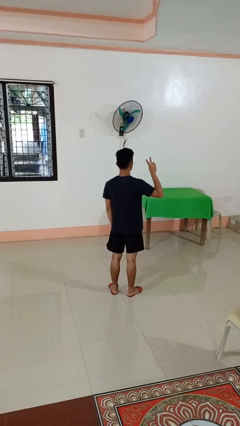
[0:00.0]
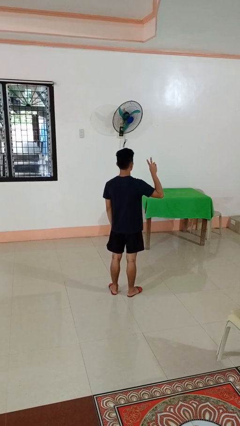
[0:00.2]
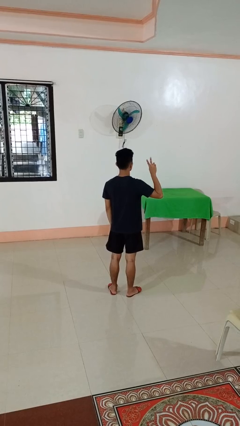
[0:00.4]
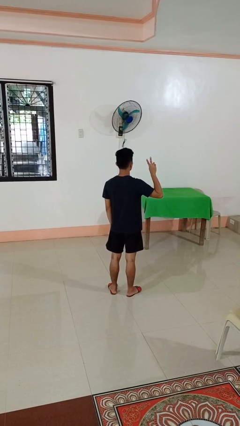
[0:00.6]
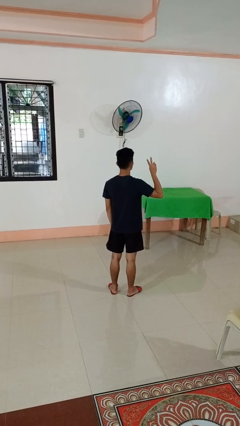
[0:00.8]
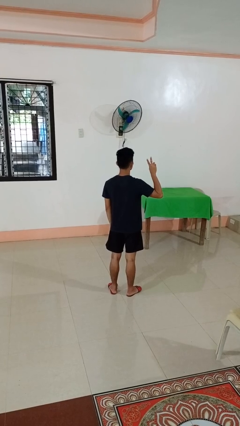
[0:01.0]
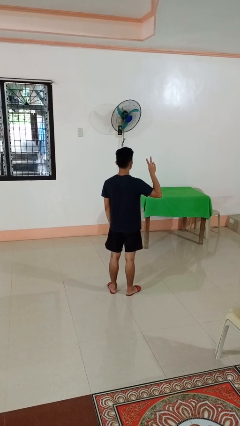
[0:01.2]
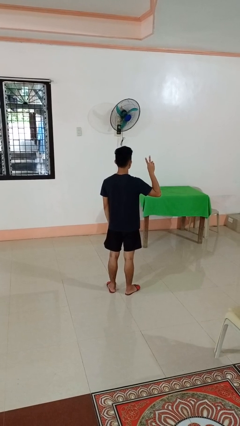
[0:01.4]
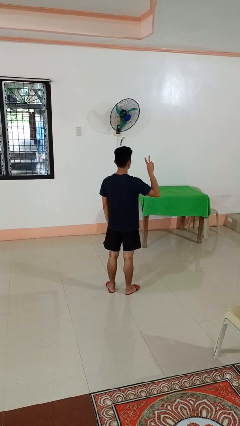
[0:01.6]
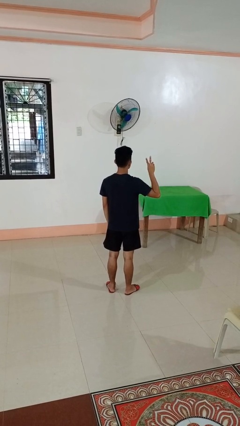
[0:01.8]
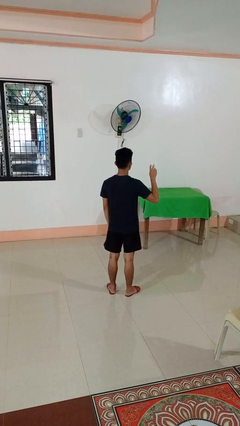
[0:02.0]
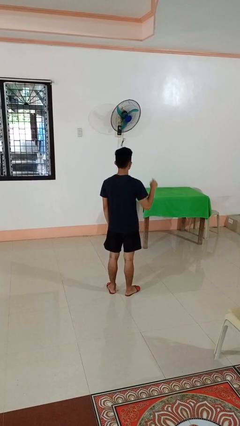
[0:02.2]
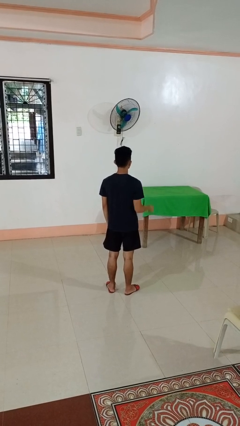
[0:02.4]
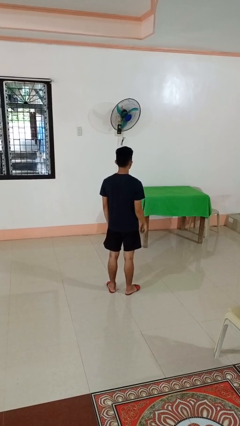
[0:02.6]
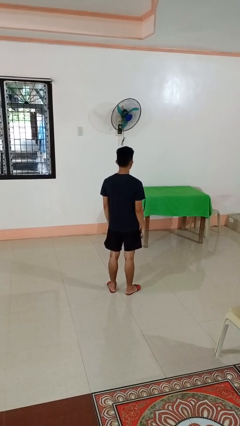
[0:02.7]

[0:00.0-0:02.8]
person gestures peace

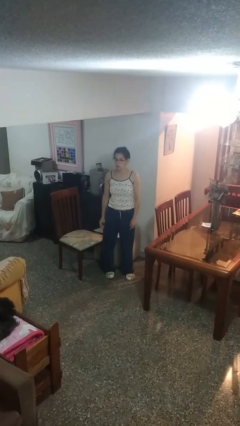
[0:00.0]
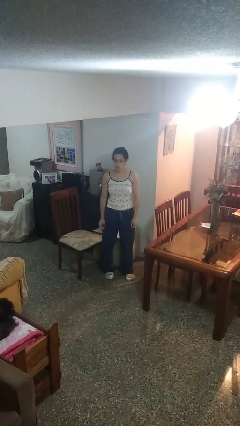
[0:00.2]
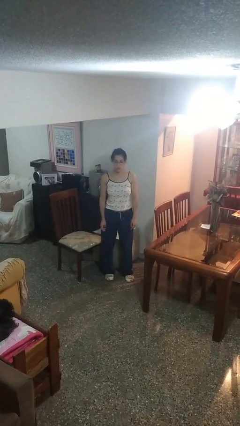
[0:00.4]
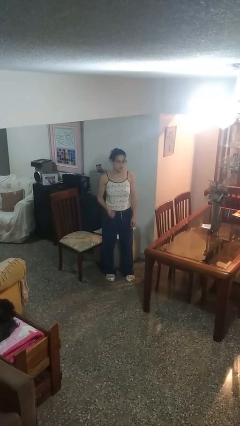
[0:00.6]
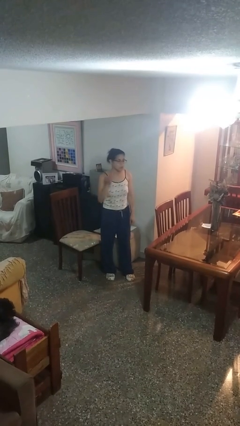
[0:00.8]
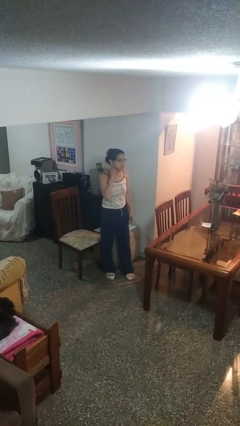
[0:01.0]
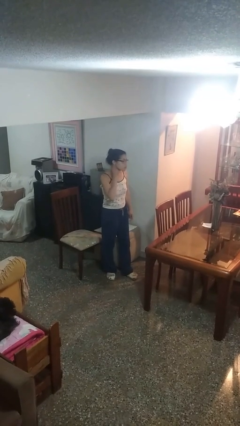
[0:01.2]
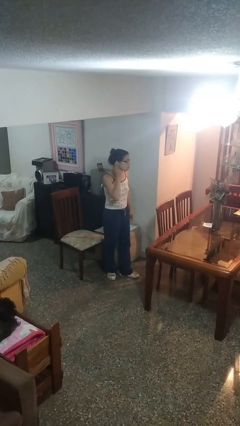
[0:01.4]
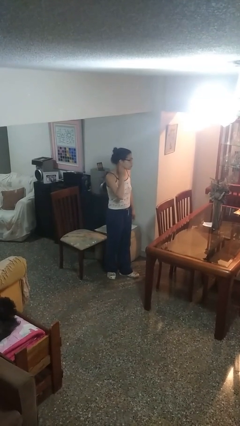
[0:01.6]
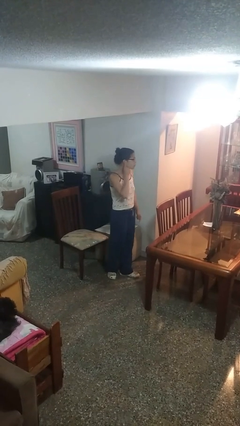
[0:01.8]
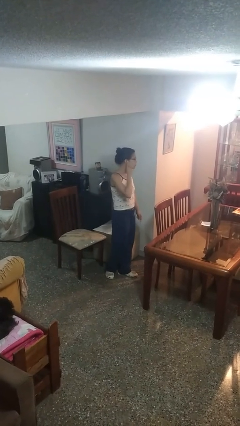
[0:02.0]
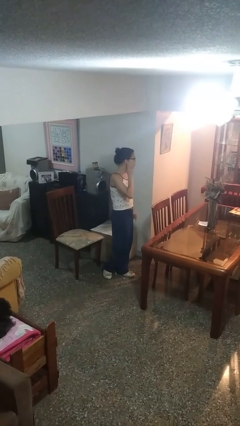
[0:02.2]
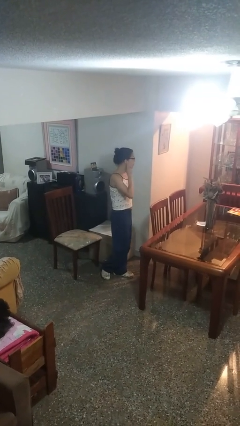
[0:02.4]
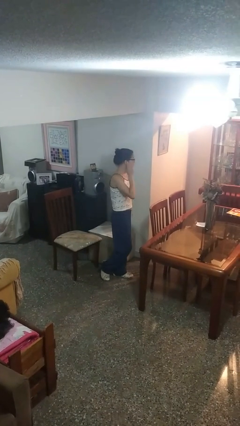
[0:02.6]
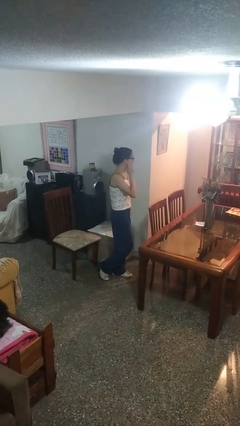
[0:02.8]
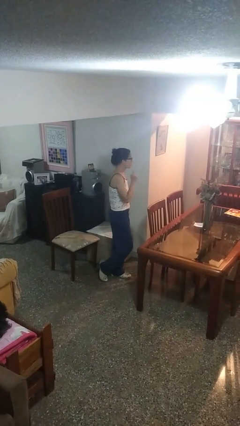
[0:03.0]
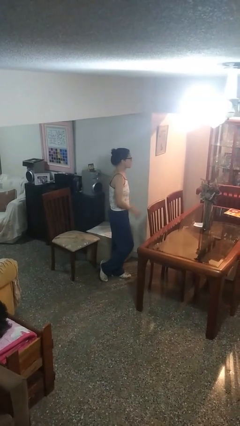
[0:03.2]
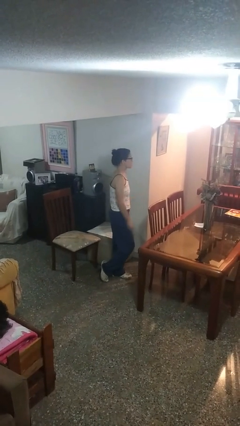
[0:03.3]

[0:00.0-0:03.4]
person gestures listen closely

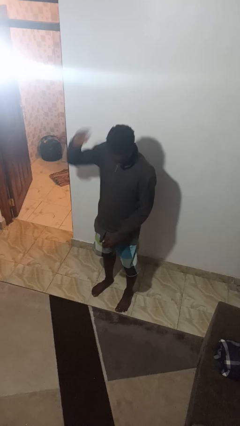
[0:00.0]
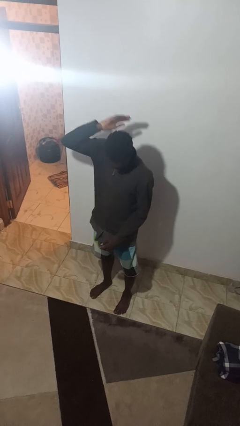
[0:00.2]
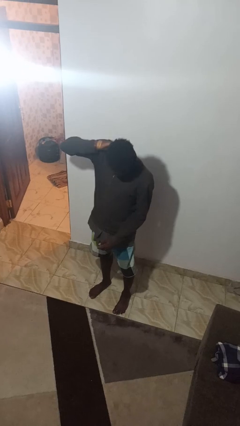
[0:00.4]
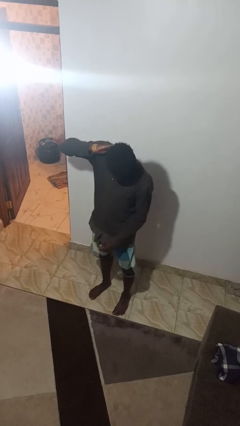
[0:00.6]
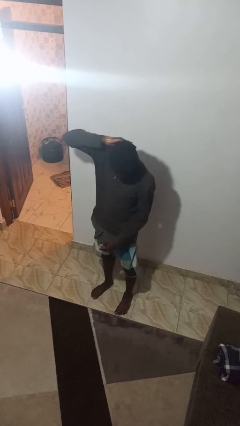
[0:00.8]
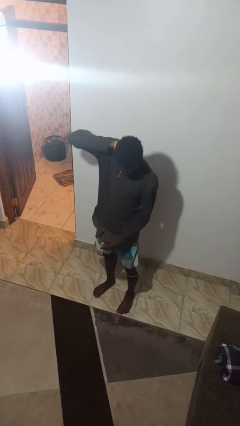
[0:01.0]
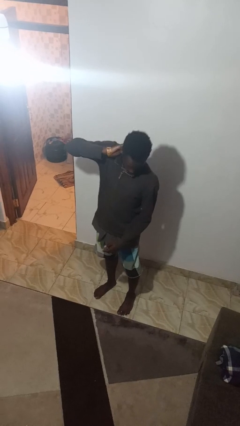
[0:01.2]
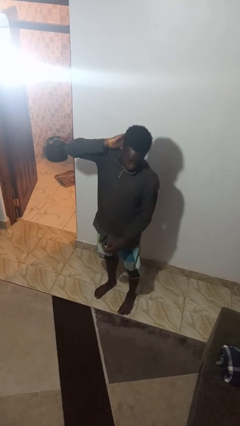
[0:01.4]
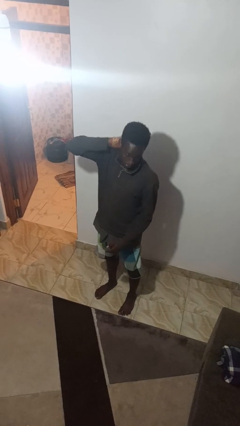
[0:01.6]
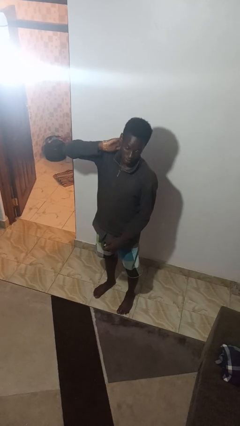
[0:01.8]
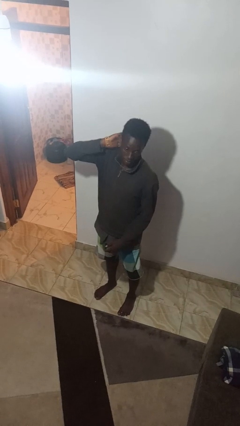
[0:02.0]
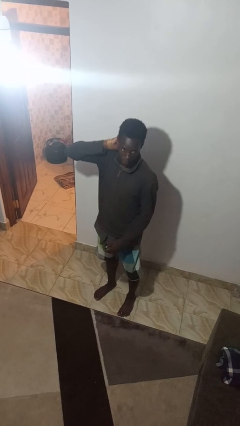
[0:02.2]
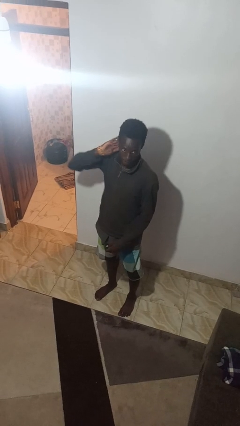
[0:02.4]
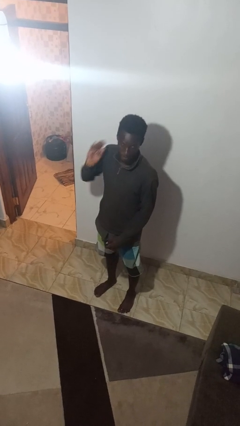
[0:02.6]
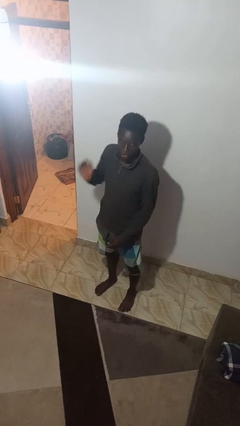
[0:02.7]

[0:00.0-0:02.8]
person swats bug

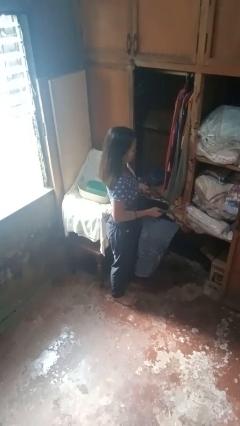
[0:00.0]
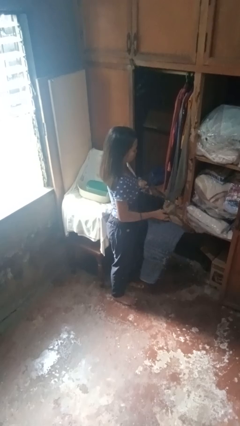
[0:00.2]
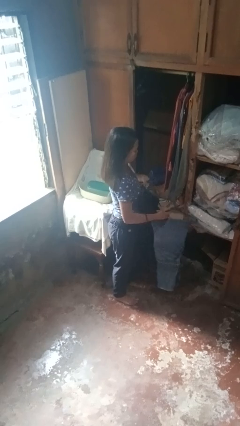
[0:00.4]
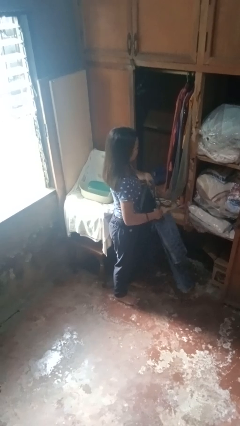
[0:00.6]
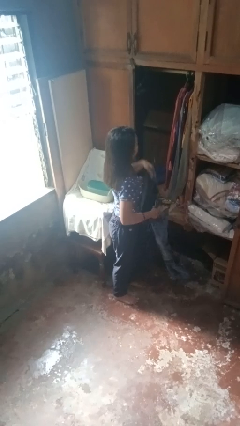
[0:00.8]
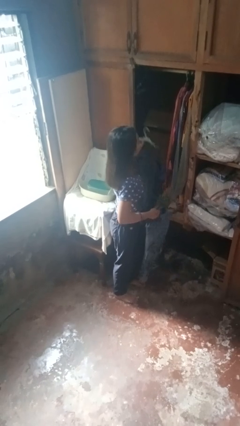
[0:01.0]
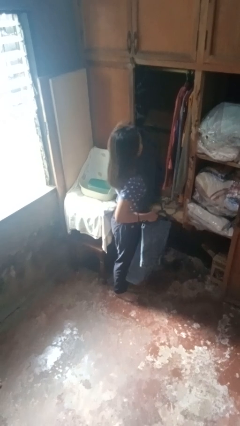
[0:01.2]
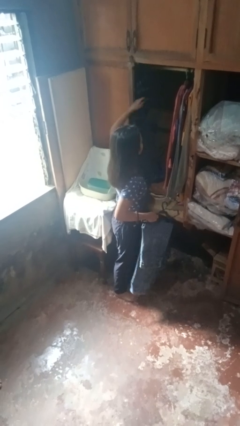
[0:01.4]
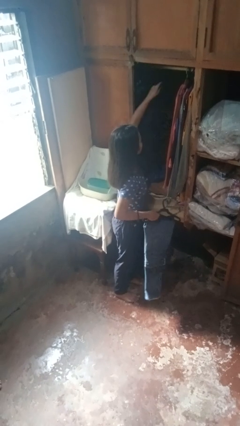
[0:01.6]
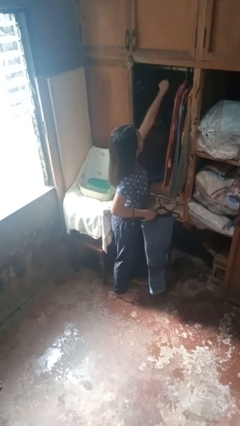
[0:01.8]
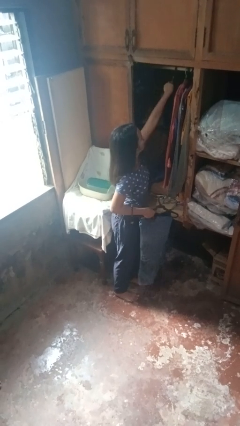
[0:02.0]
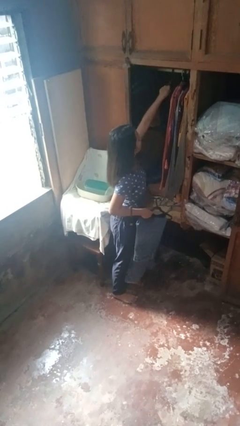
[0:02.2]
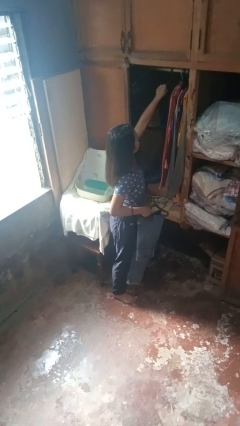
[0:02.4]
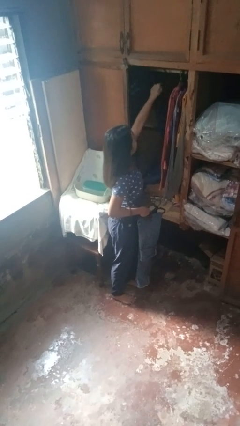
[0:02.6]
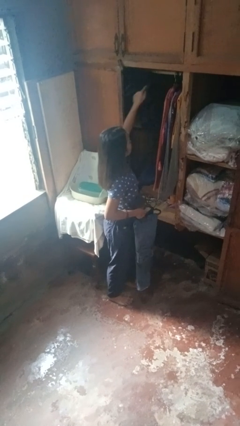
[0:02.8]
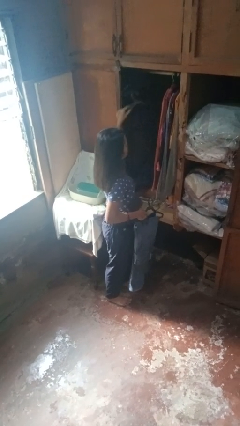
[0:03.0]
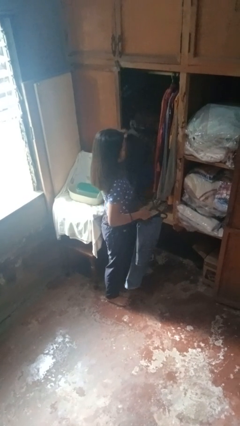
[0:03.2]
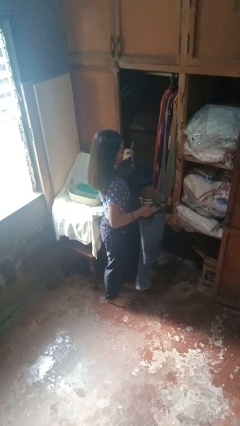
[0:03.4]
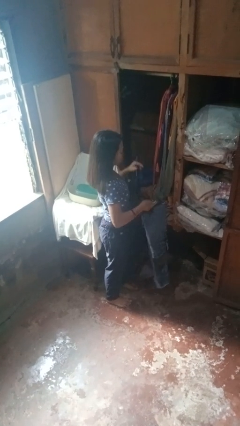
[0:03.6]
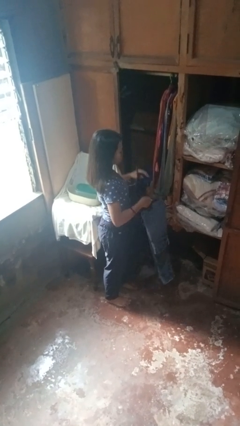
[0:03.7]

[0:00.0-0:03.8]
person puts clothes into closet

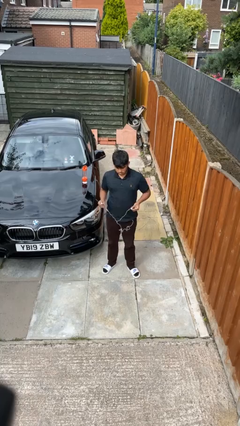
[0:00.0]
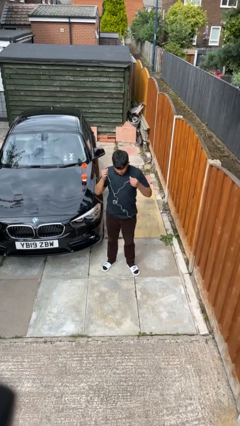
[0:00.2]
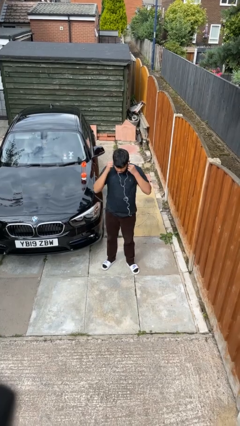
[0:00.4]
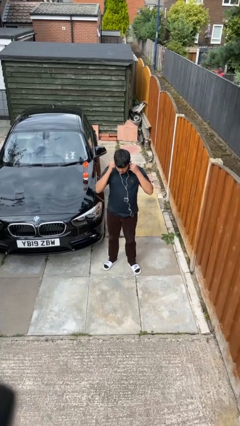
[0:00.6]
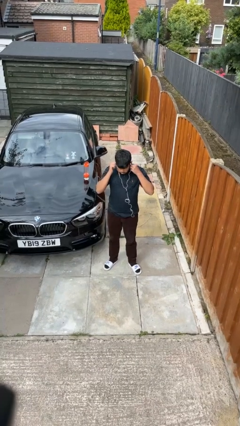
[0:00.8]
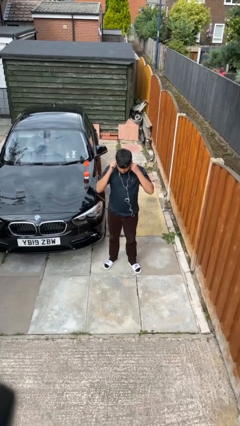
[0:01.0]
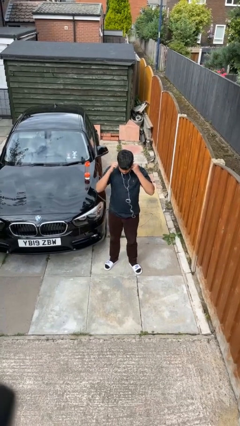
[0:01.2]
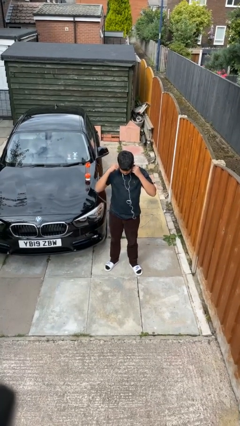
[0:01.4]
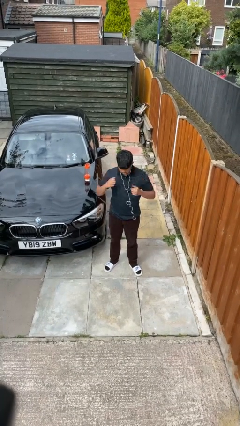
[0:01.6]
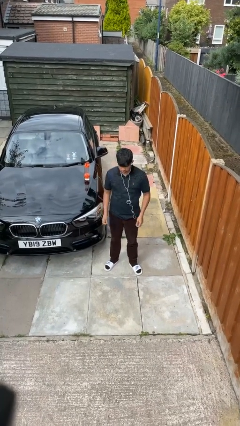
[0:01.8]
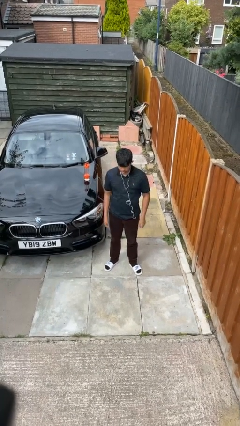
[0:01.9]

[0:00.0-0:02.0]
person puts on headphones

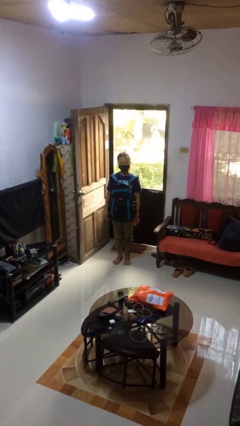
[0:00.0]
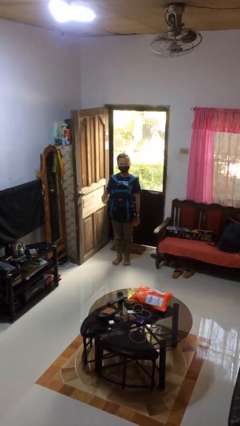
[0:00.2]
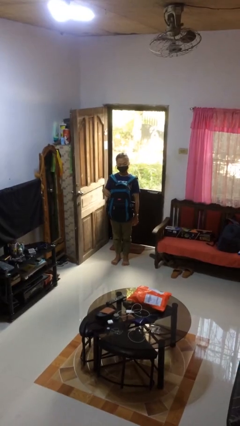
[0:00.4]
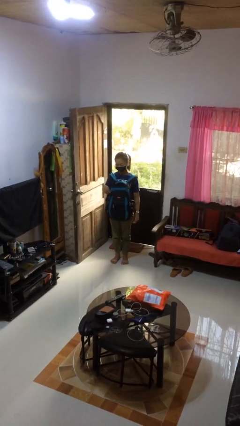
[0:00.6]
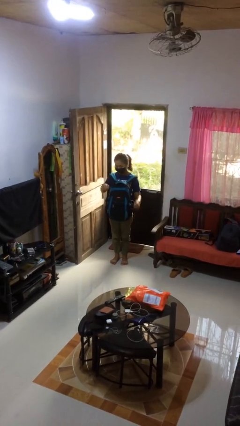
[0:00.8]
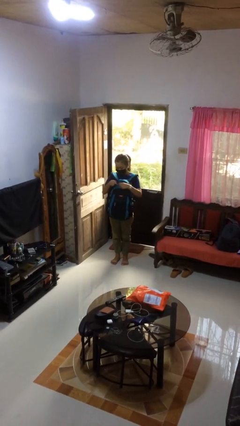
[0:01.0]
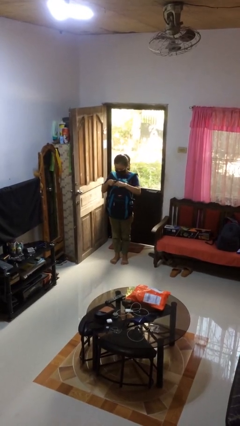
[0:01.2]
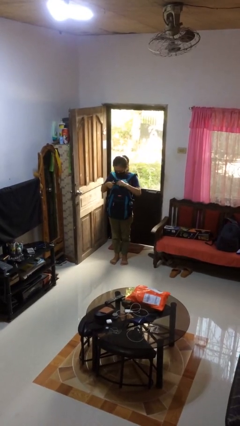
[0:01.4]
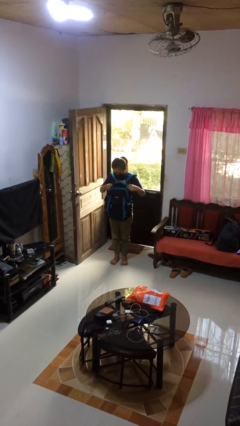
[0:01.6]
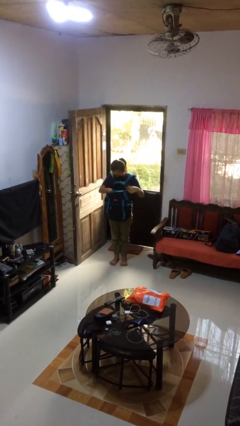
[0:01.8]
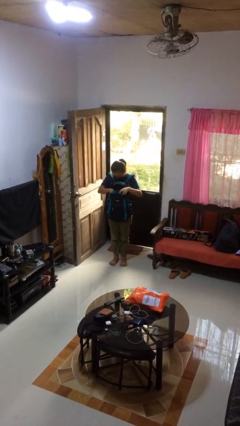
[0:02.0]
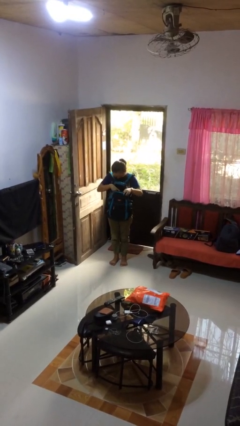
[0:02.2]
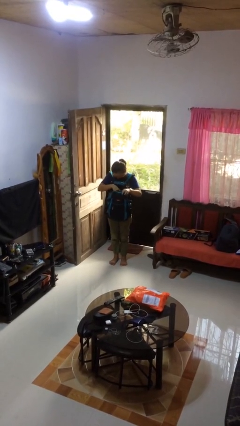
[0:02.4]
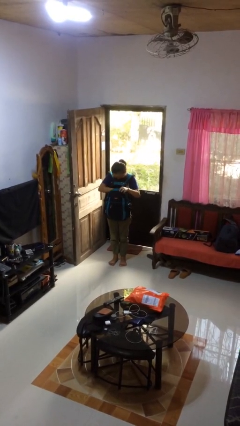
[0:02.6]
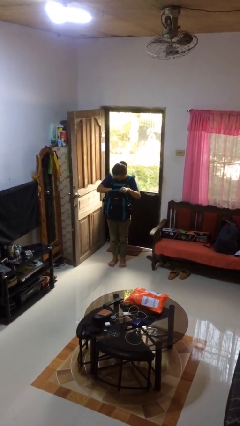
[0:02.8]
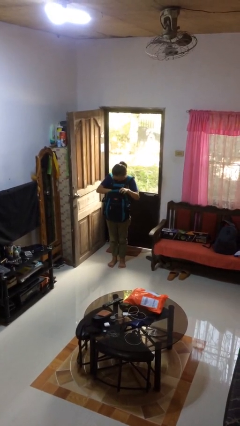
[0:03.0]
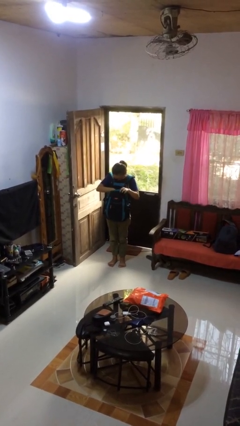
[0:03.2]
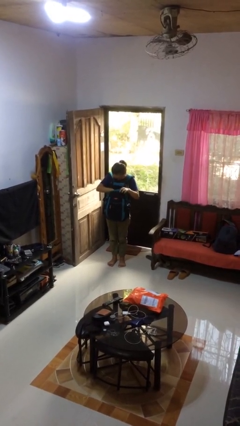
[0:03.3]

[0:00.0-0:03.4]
person searches in backpack
